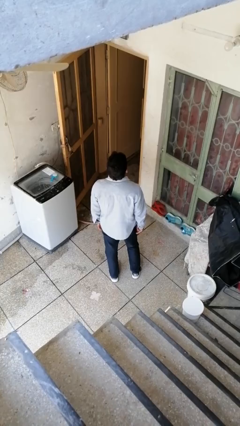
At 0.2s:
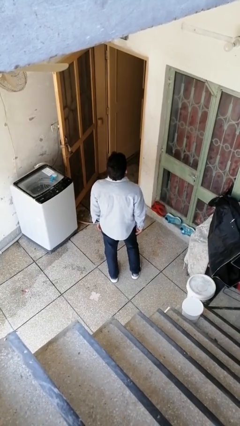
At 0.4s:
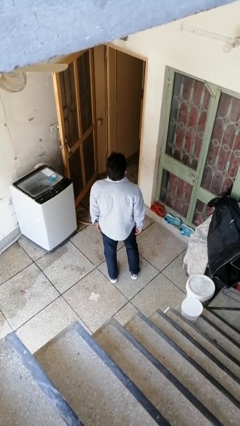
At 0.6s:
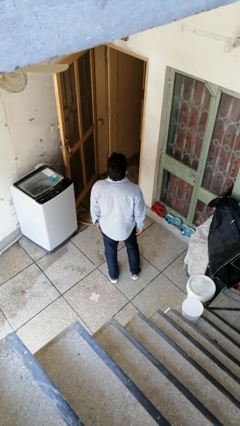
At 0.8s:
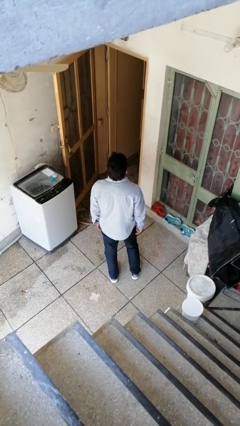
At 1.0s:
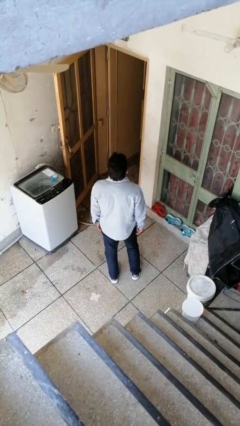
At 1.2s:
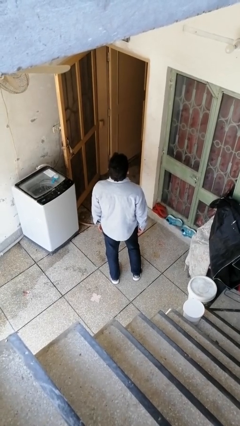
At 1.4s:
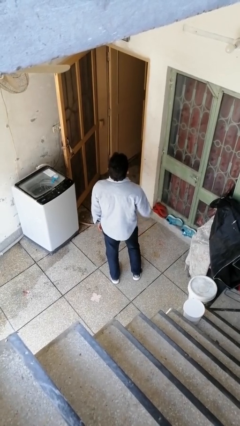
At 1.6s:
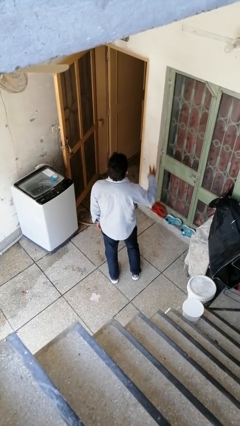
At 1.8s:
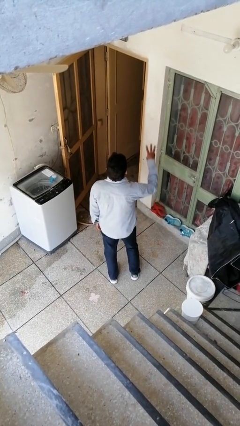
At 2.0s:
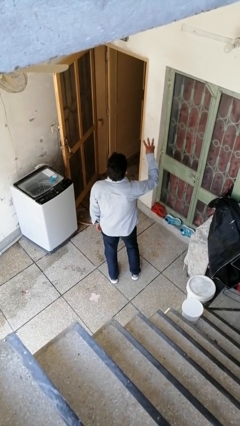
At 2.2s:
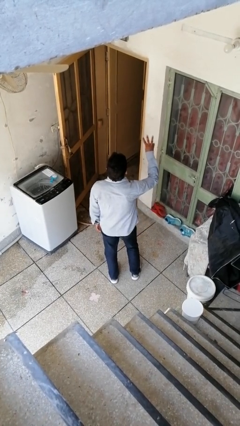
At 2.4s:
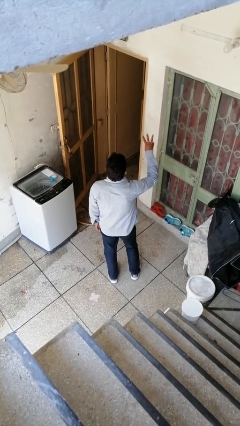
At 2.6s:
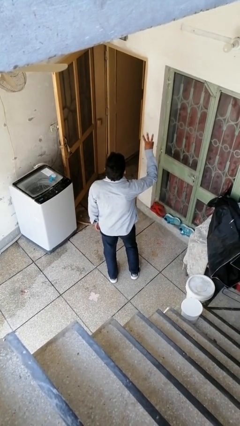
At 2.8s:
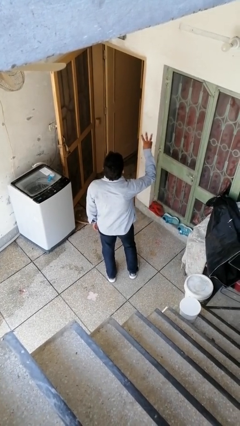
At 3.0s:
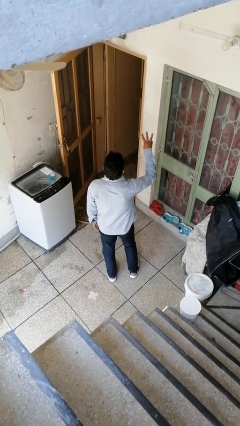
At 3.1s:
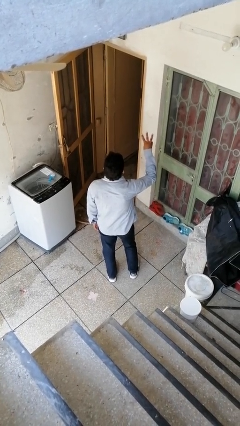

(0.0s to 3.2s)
person gestures number three

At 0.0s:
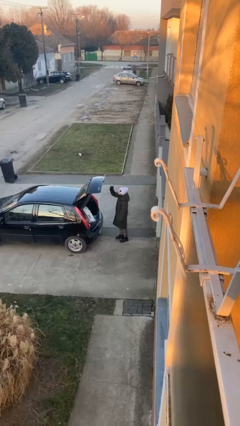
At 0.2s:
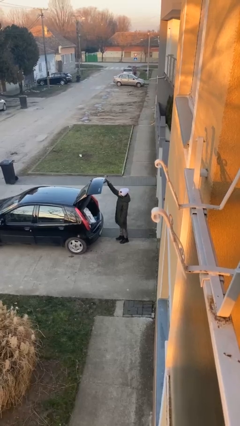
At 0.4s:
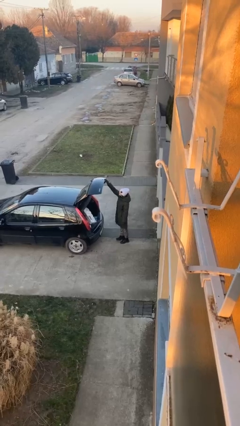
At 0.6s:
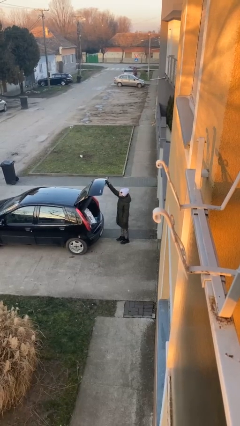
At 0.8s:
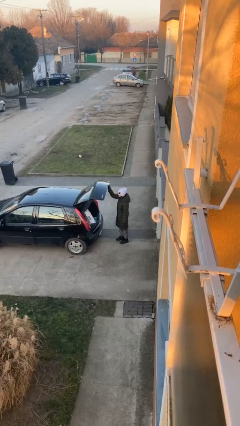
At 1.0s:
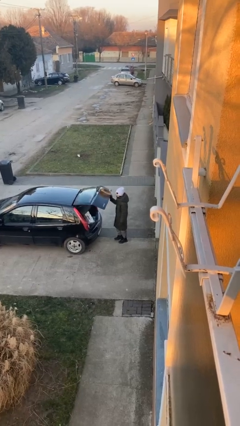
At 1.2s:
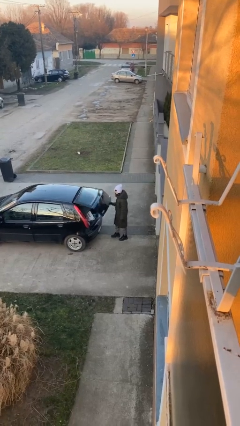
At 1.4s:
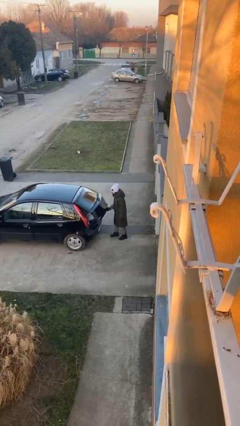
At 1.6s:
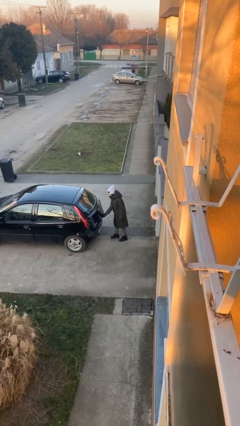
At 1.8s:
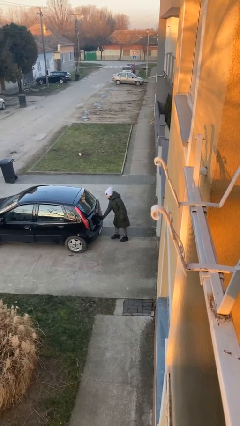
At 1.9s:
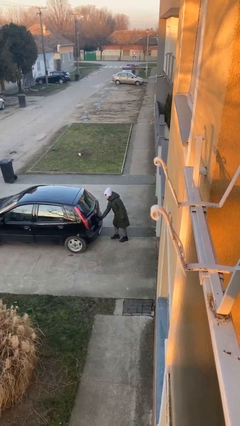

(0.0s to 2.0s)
person closes car trunk

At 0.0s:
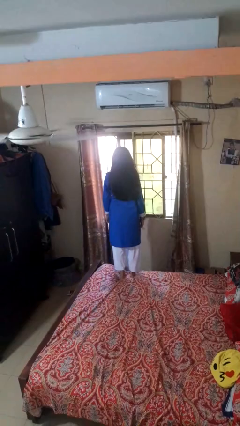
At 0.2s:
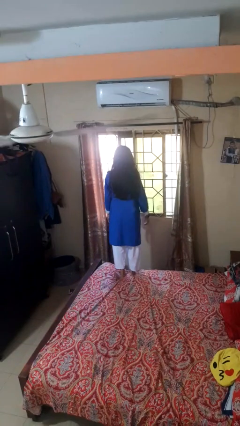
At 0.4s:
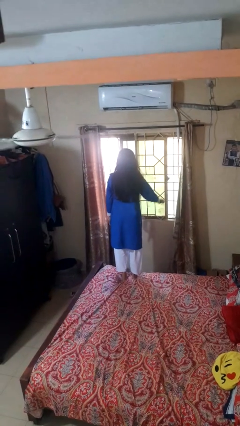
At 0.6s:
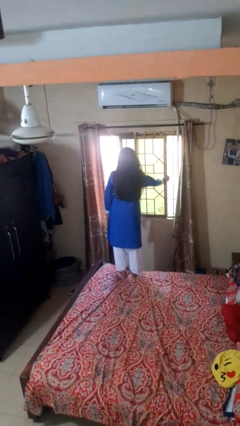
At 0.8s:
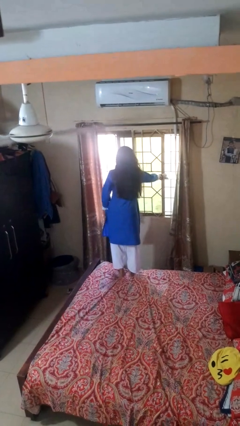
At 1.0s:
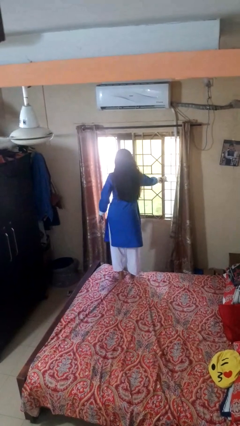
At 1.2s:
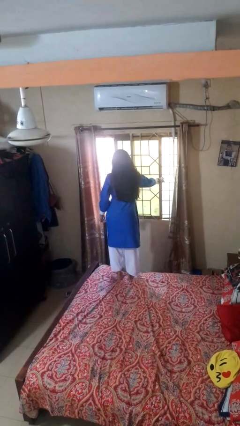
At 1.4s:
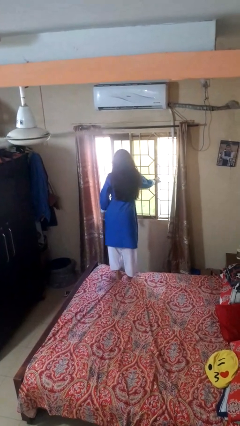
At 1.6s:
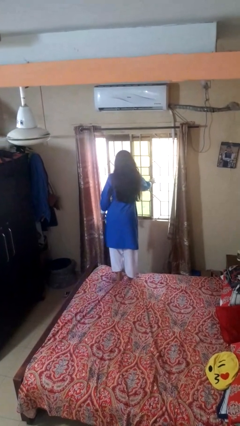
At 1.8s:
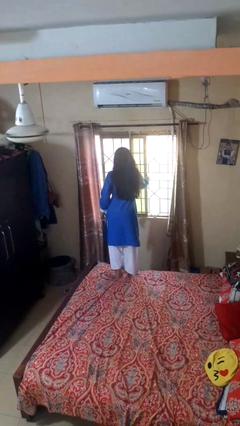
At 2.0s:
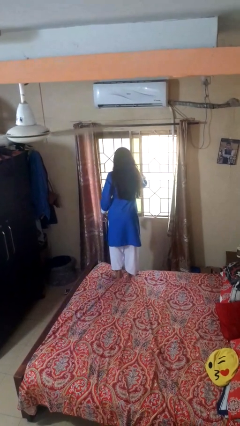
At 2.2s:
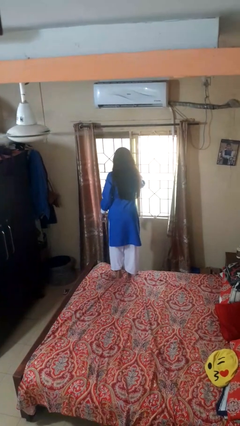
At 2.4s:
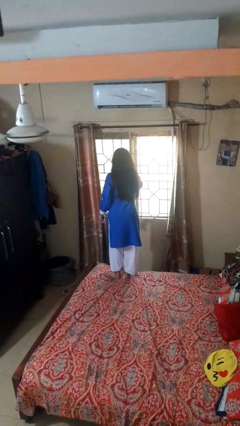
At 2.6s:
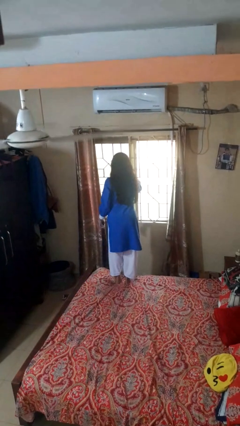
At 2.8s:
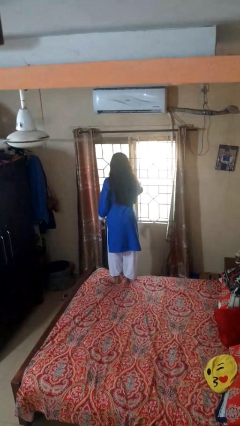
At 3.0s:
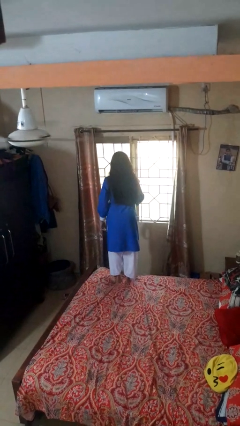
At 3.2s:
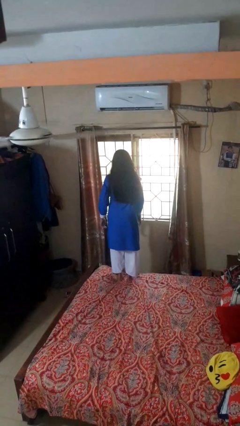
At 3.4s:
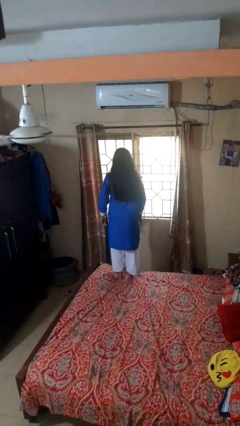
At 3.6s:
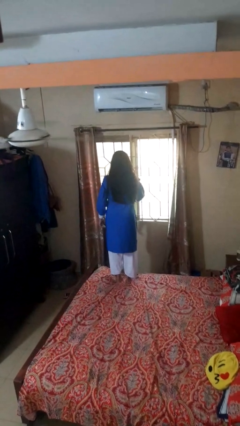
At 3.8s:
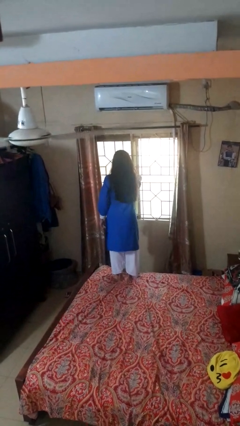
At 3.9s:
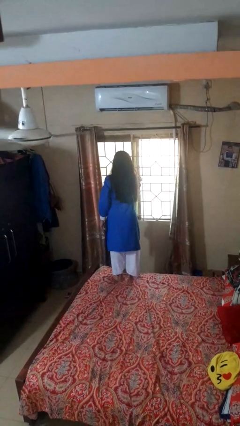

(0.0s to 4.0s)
person closes home window

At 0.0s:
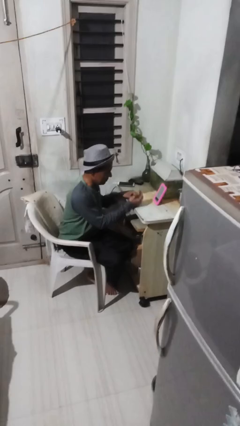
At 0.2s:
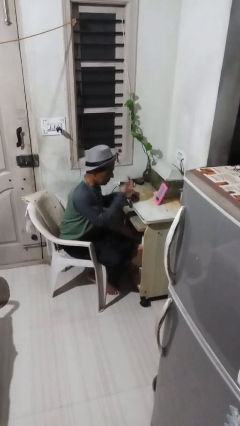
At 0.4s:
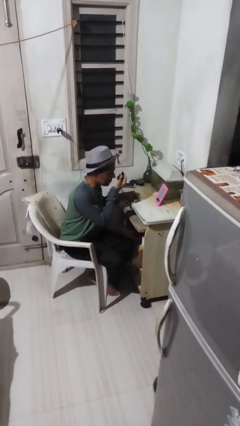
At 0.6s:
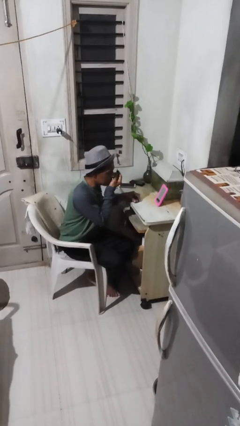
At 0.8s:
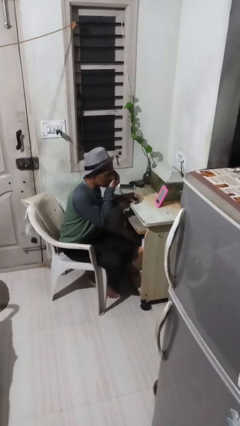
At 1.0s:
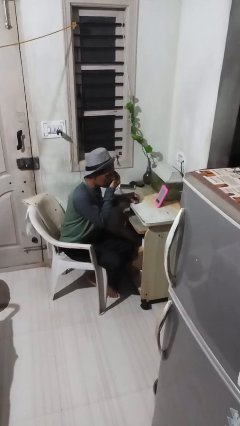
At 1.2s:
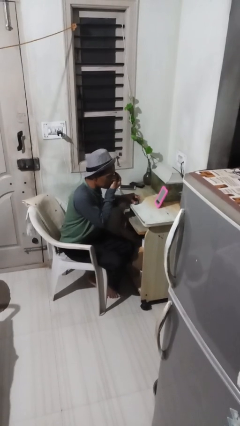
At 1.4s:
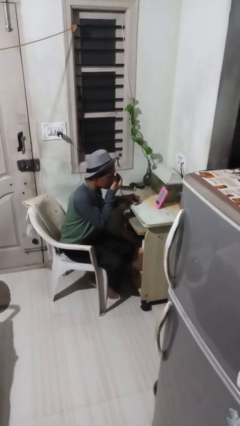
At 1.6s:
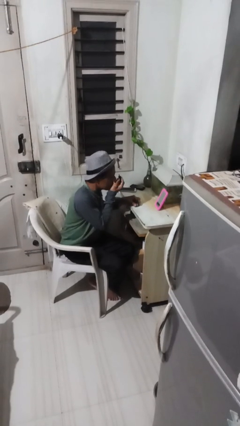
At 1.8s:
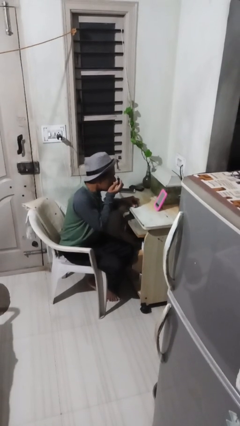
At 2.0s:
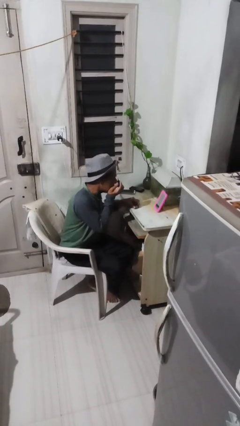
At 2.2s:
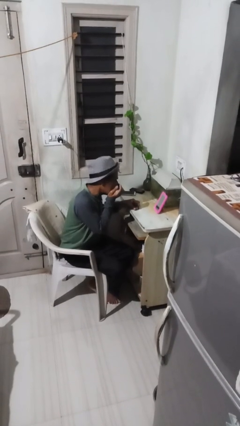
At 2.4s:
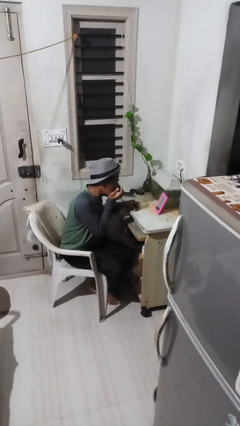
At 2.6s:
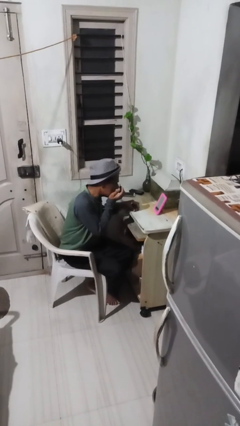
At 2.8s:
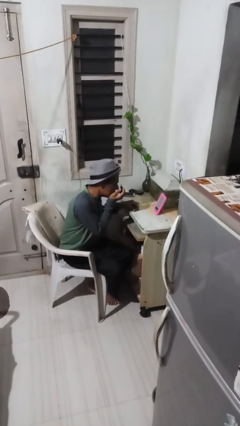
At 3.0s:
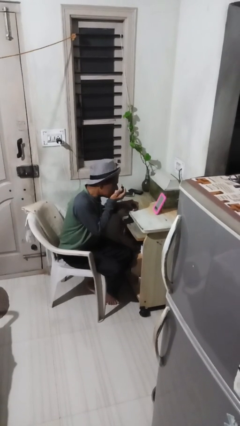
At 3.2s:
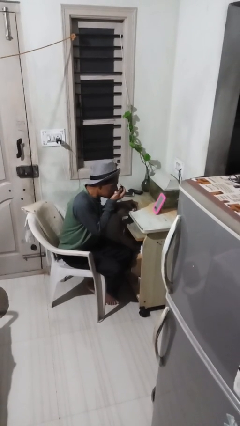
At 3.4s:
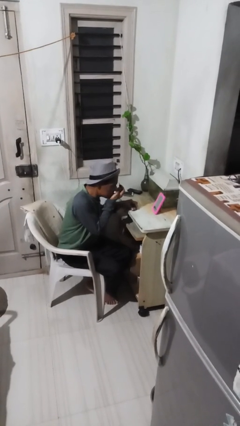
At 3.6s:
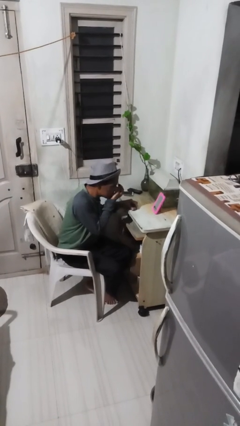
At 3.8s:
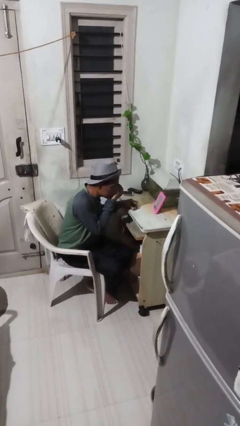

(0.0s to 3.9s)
person applies eye makeup

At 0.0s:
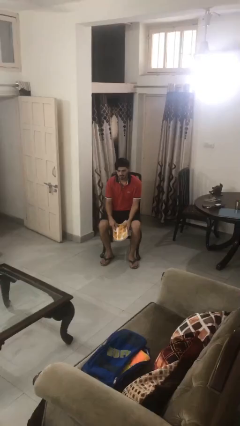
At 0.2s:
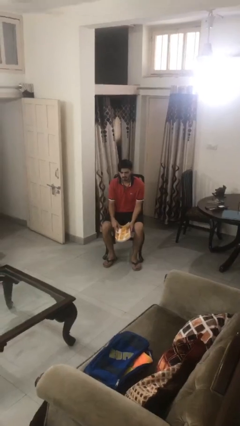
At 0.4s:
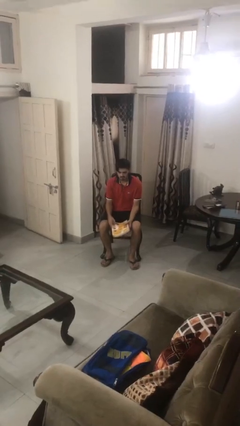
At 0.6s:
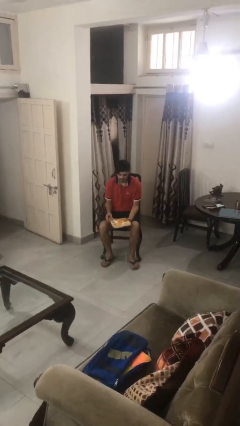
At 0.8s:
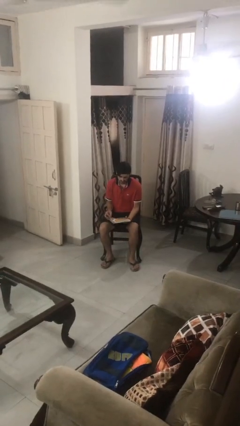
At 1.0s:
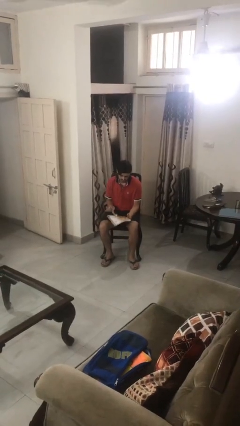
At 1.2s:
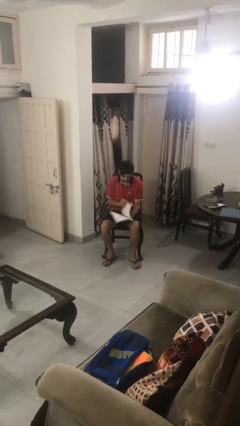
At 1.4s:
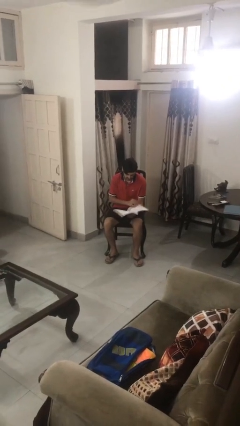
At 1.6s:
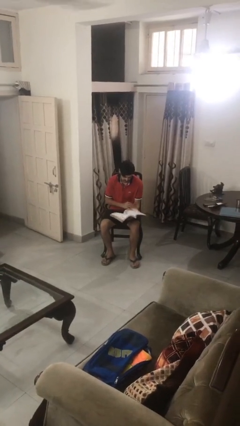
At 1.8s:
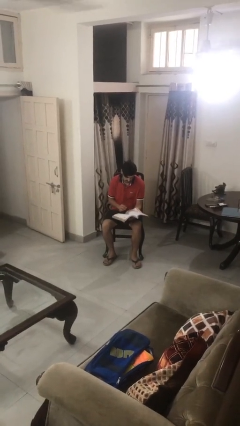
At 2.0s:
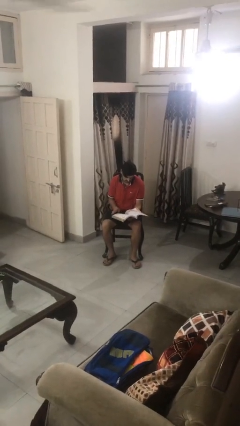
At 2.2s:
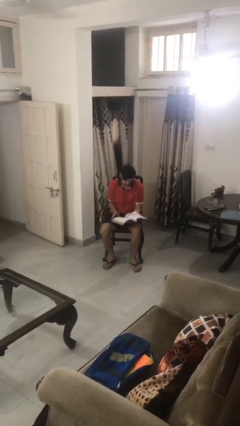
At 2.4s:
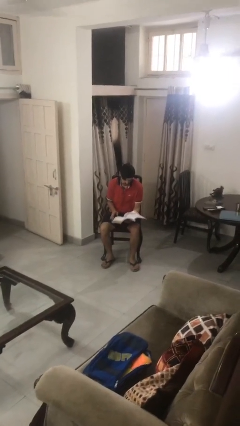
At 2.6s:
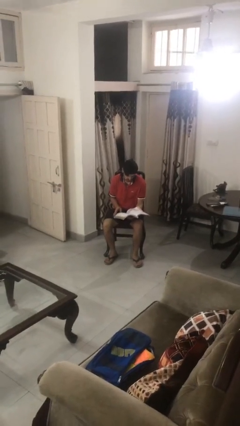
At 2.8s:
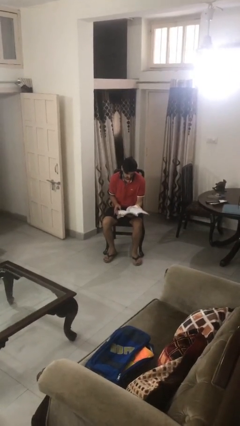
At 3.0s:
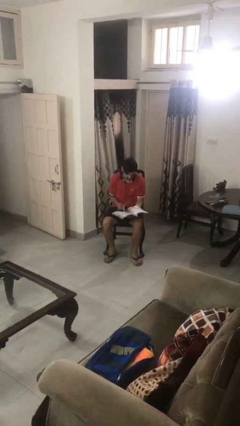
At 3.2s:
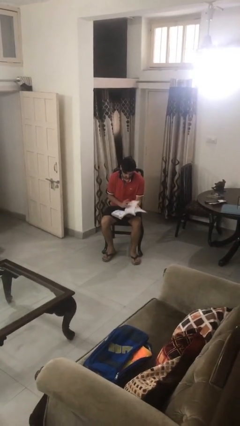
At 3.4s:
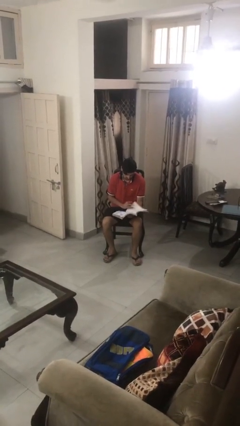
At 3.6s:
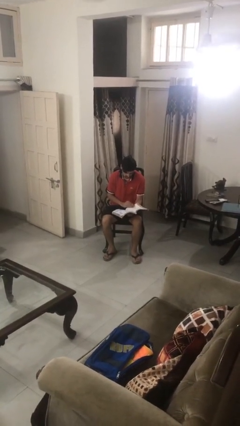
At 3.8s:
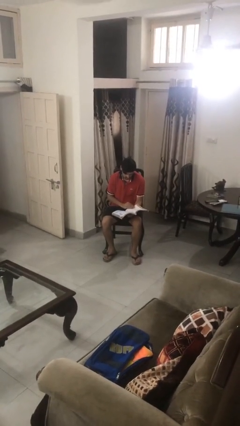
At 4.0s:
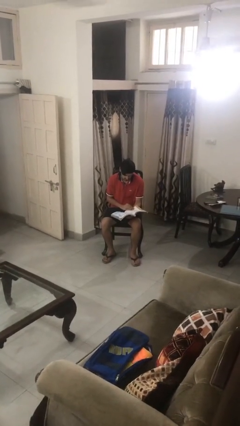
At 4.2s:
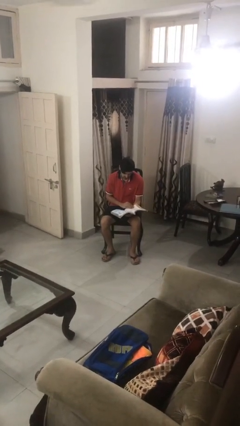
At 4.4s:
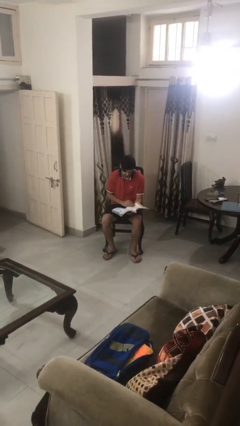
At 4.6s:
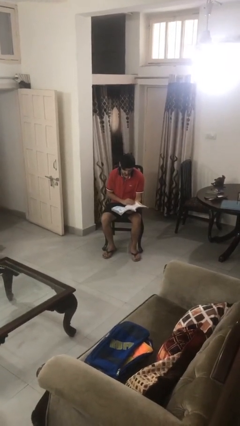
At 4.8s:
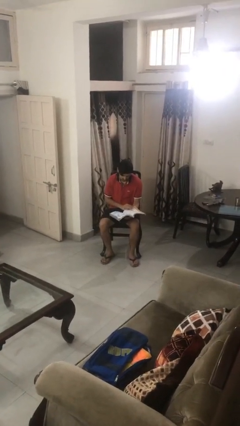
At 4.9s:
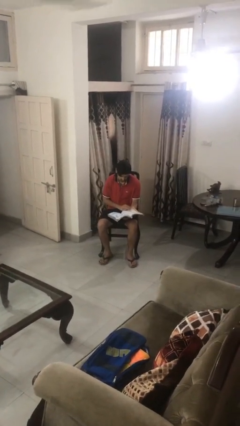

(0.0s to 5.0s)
person reads book
